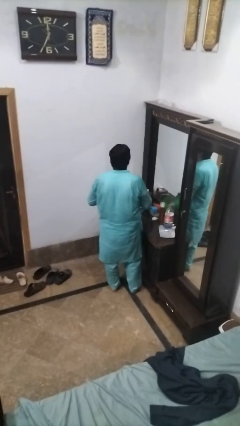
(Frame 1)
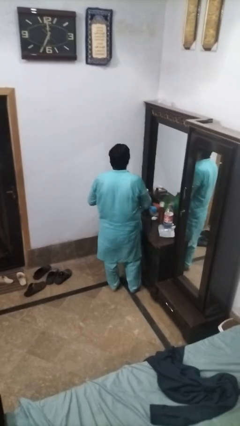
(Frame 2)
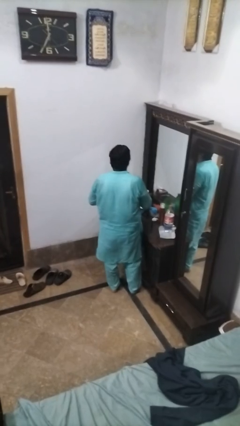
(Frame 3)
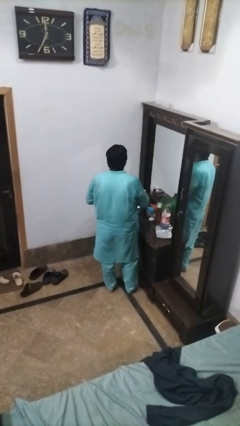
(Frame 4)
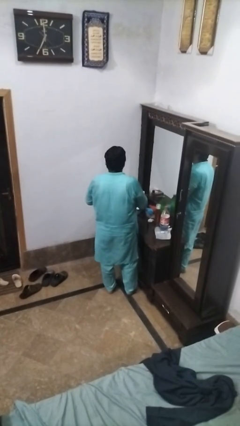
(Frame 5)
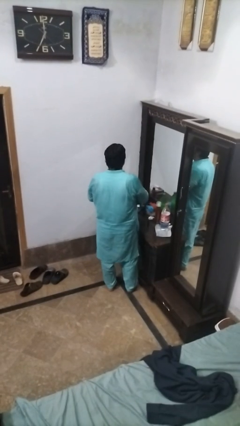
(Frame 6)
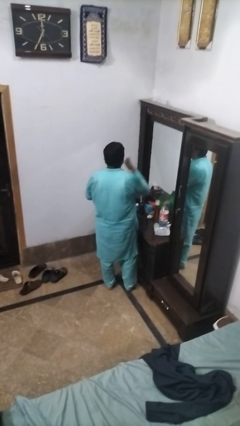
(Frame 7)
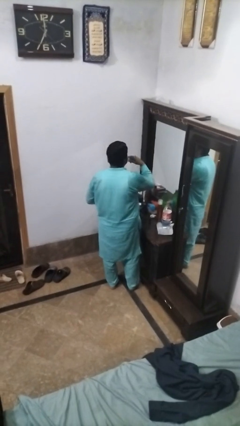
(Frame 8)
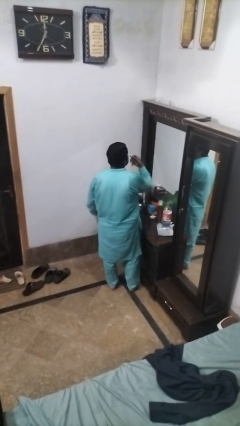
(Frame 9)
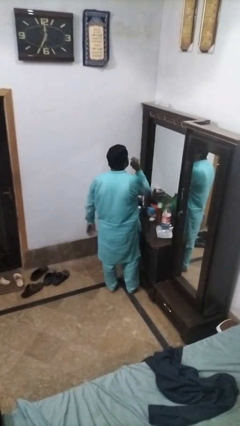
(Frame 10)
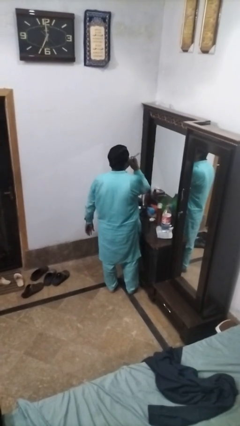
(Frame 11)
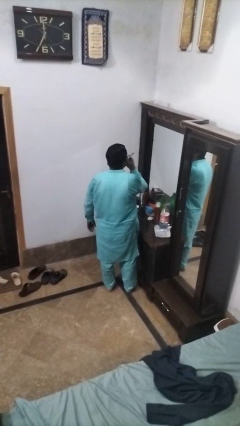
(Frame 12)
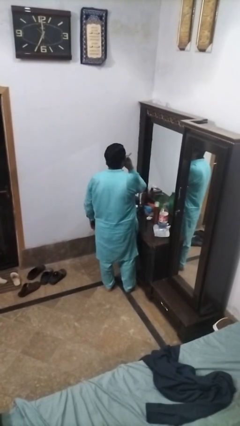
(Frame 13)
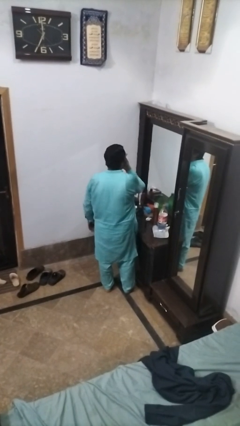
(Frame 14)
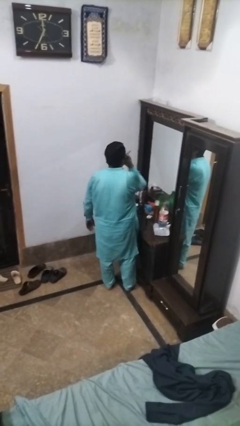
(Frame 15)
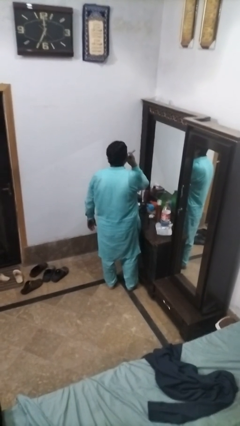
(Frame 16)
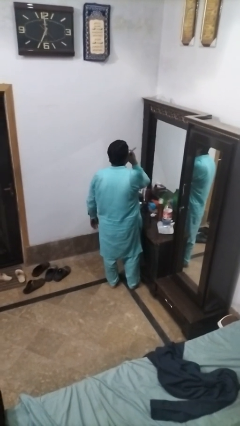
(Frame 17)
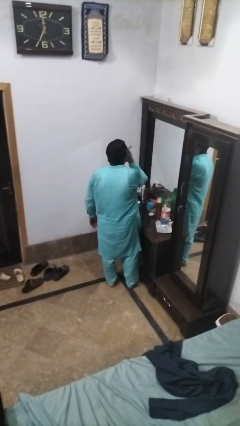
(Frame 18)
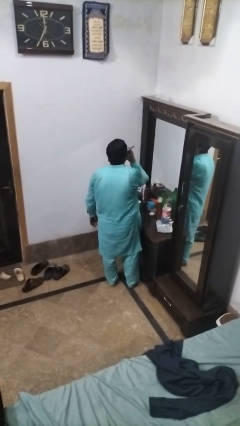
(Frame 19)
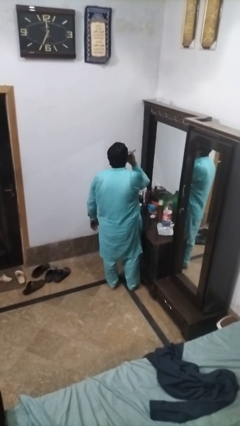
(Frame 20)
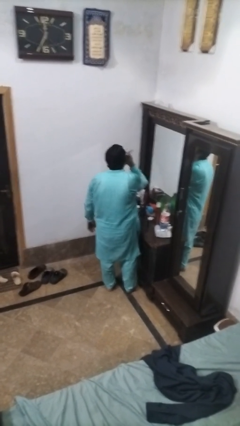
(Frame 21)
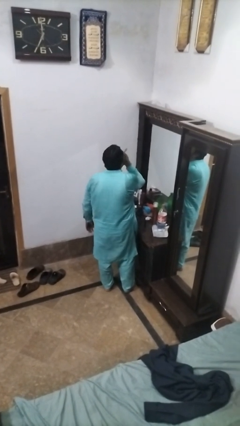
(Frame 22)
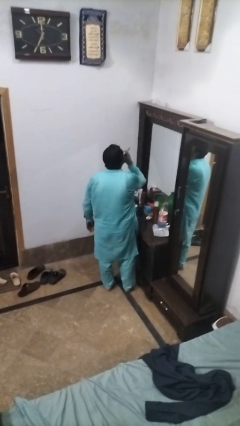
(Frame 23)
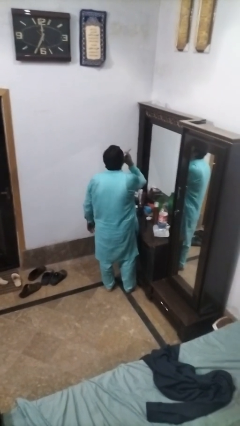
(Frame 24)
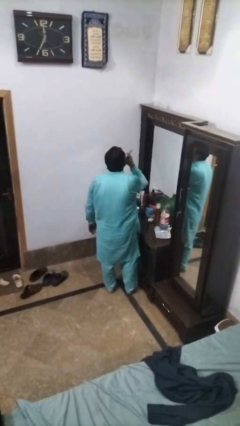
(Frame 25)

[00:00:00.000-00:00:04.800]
person applies lip makeup

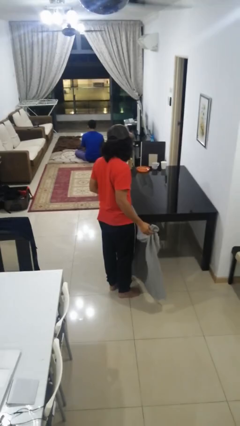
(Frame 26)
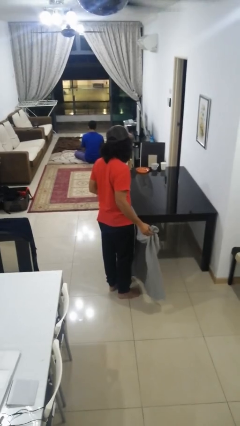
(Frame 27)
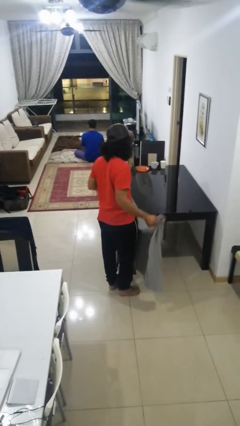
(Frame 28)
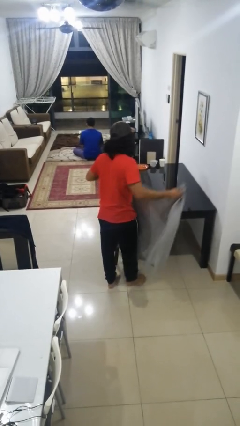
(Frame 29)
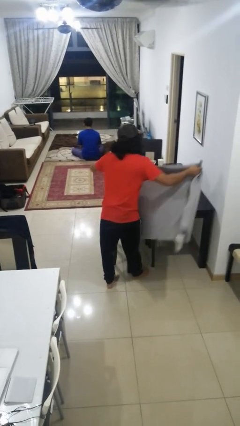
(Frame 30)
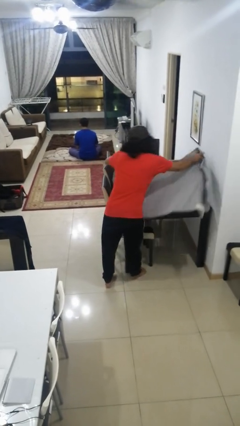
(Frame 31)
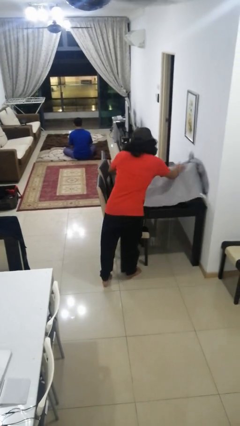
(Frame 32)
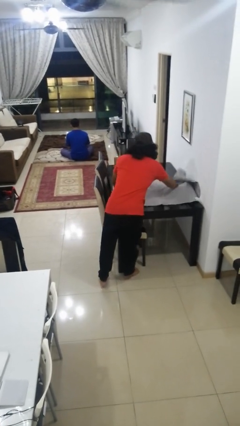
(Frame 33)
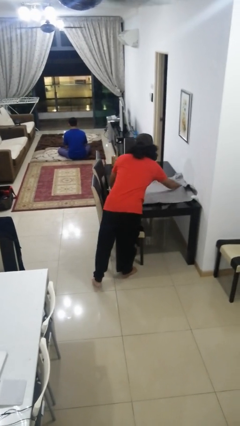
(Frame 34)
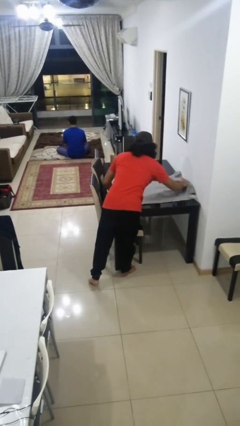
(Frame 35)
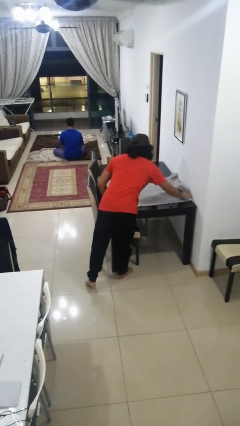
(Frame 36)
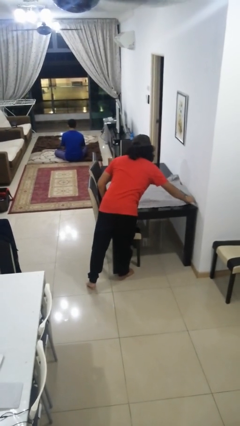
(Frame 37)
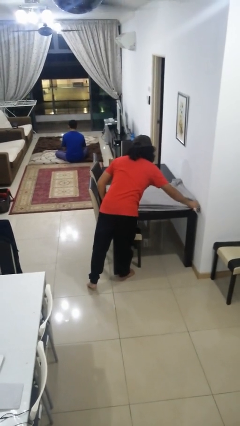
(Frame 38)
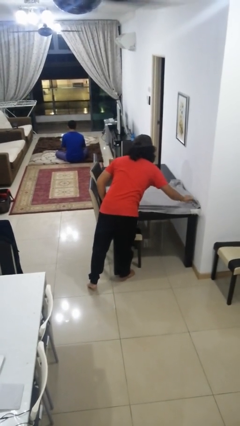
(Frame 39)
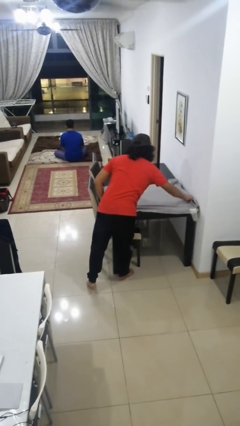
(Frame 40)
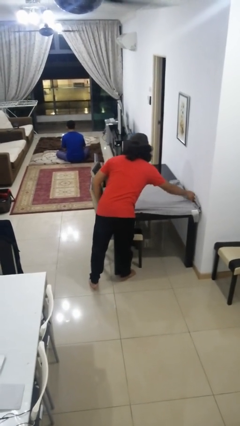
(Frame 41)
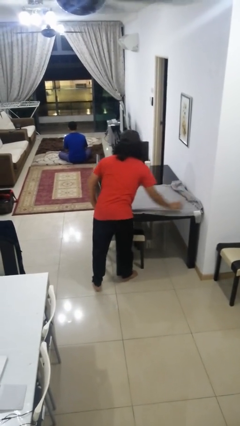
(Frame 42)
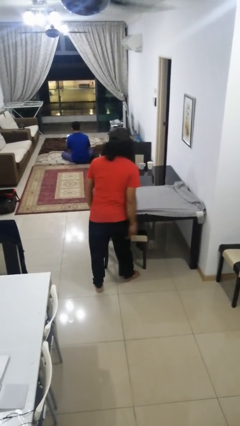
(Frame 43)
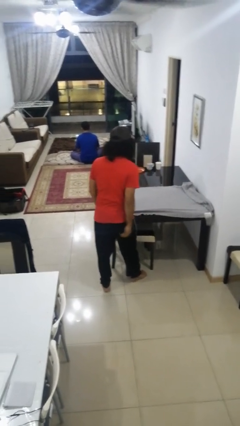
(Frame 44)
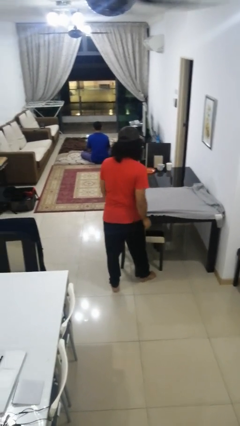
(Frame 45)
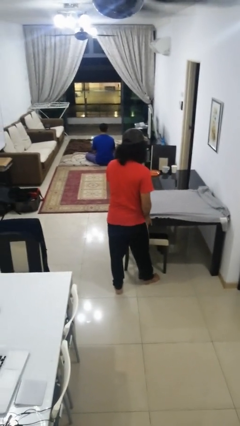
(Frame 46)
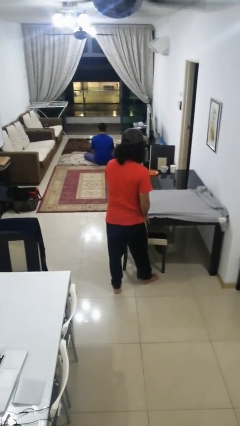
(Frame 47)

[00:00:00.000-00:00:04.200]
person spreads tablecloth

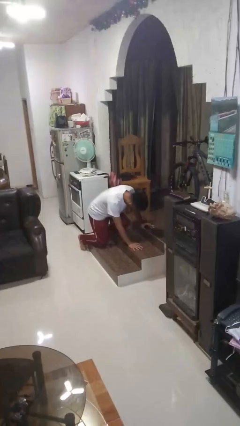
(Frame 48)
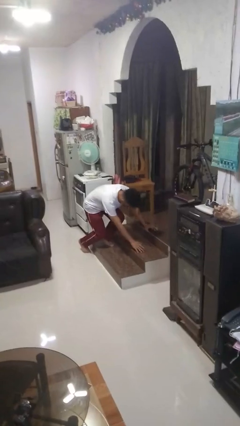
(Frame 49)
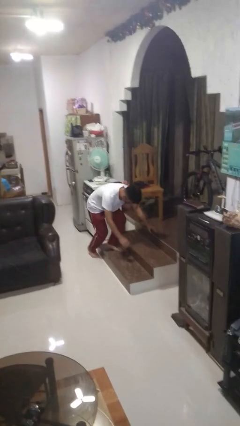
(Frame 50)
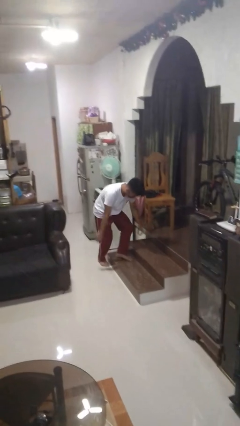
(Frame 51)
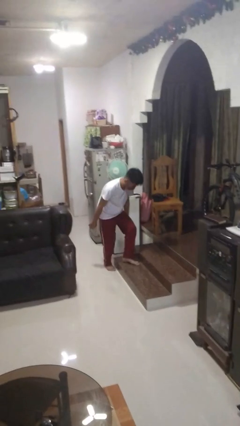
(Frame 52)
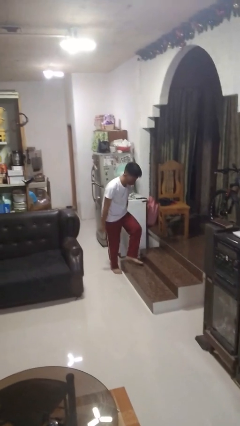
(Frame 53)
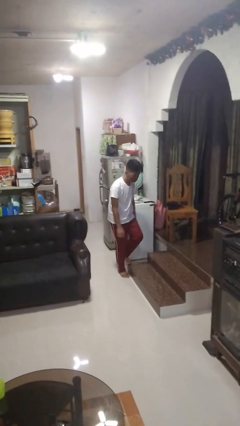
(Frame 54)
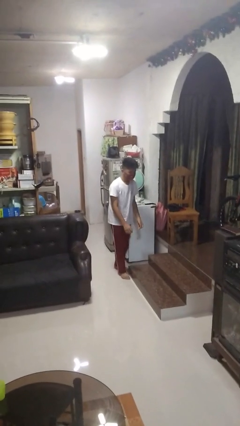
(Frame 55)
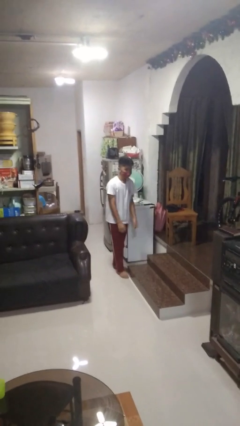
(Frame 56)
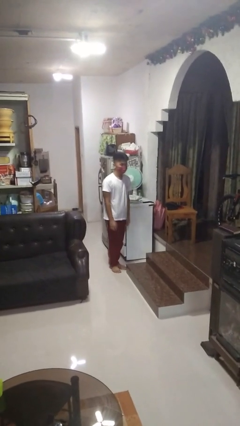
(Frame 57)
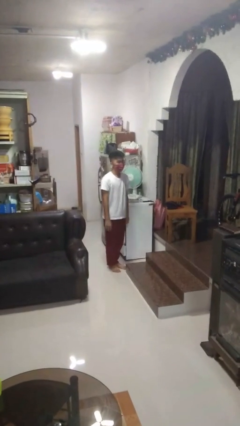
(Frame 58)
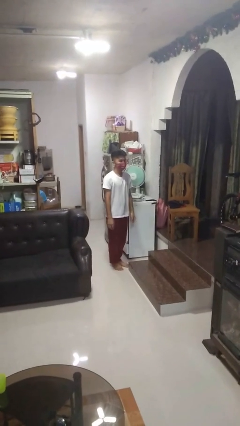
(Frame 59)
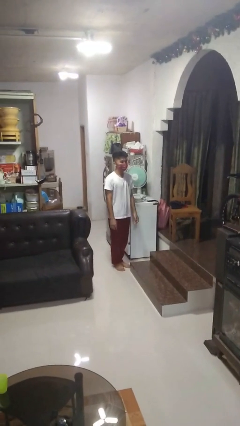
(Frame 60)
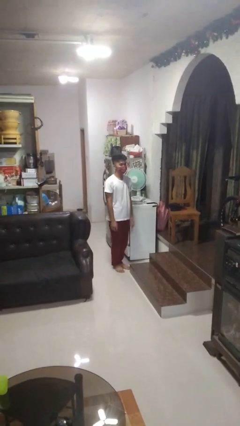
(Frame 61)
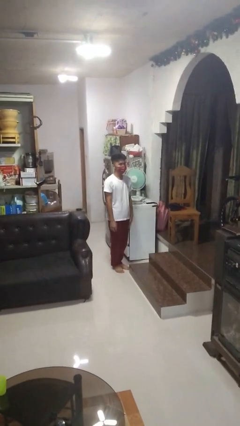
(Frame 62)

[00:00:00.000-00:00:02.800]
person stands up from floor

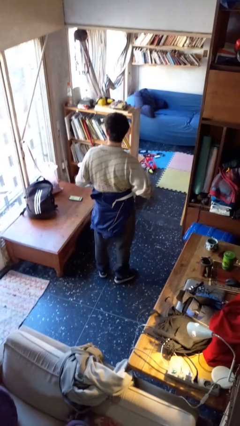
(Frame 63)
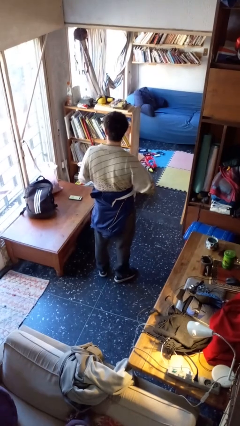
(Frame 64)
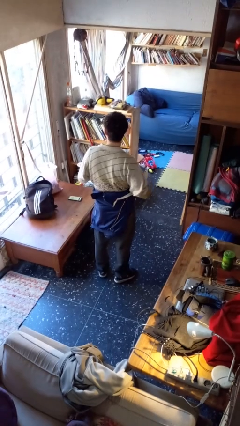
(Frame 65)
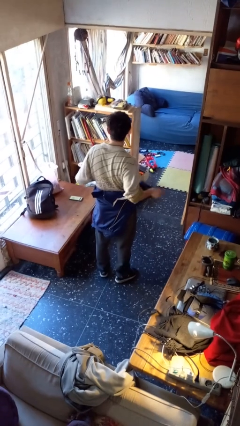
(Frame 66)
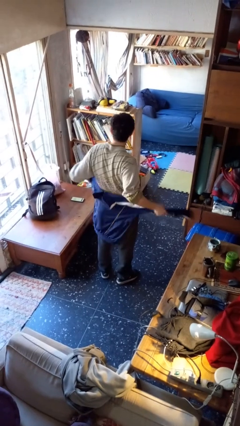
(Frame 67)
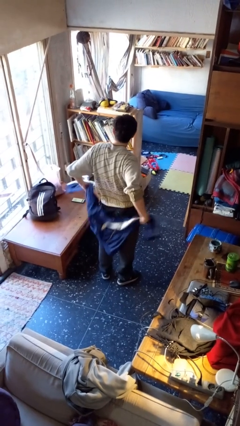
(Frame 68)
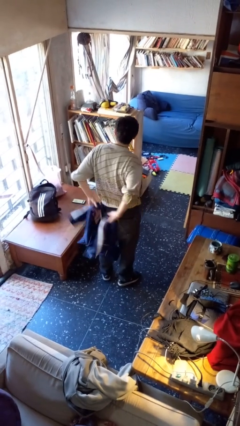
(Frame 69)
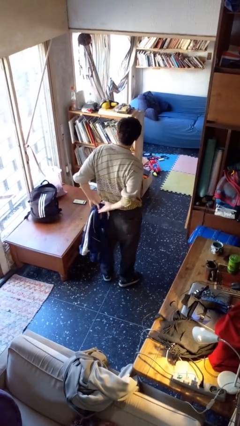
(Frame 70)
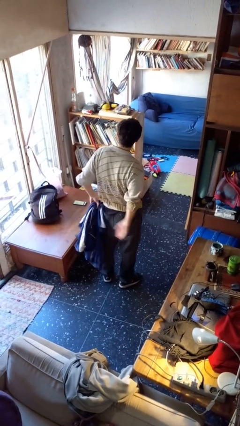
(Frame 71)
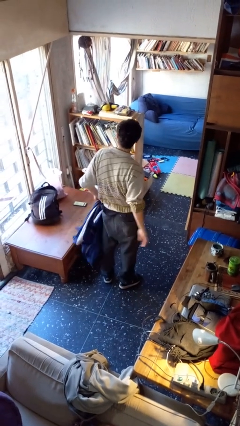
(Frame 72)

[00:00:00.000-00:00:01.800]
person unties jacket around waist

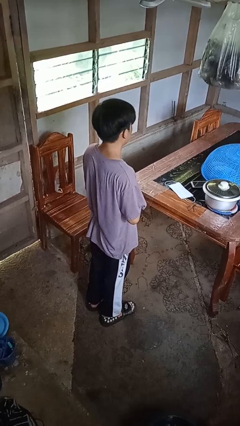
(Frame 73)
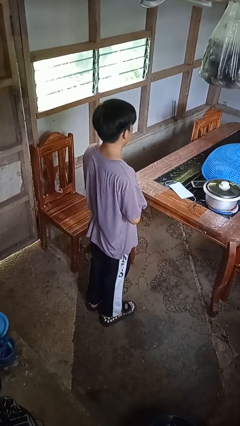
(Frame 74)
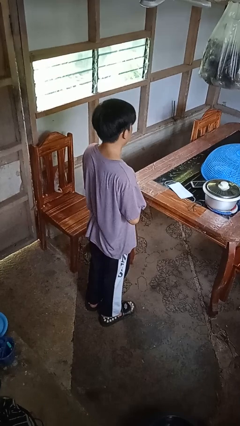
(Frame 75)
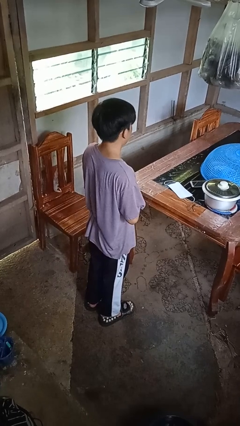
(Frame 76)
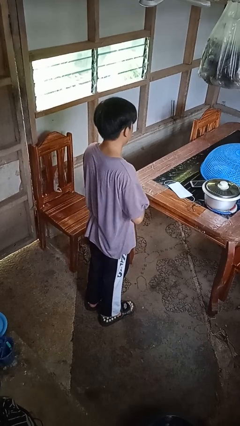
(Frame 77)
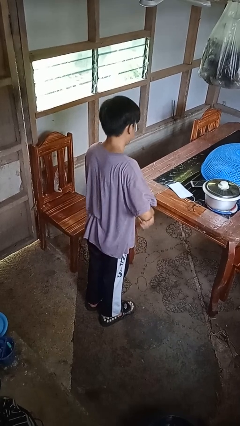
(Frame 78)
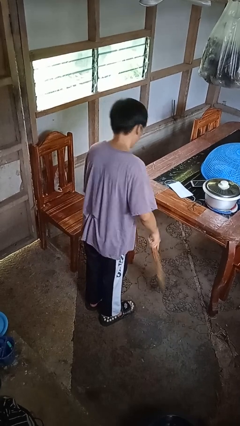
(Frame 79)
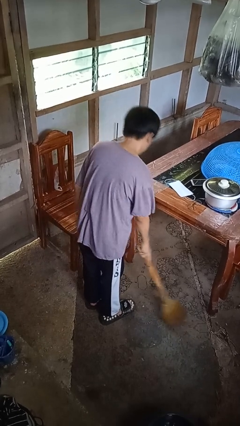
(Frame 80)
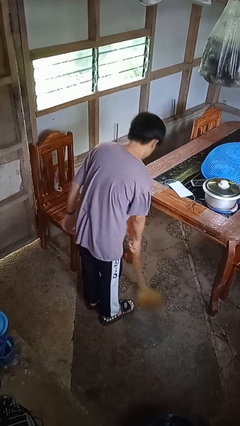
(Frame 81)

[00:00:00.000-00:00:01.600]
person sweeps floor

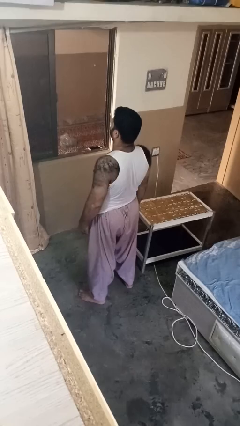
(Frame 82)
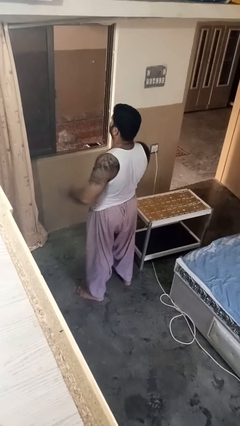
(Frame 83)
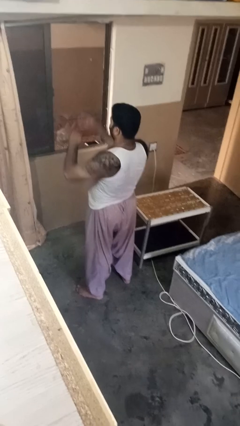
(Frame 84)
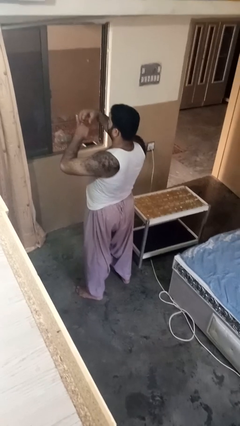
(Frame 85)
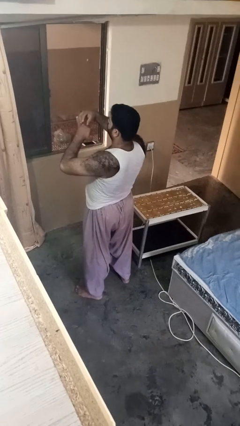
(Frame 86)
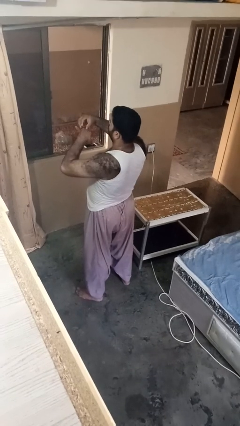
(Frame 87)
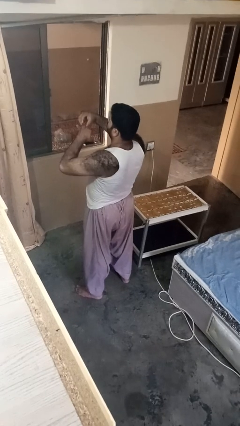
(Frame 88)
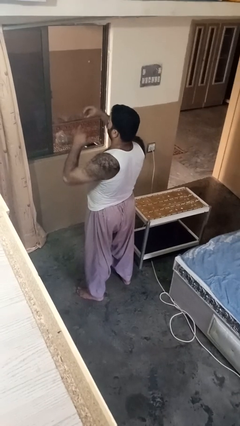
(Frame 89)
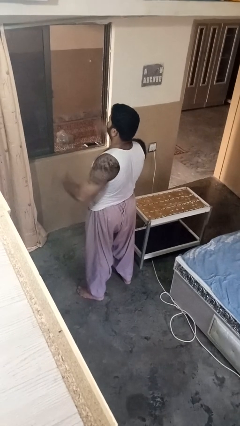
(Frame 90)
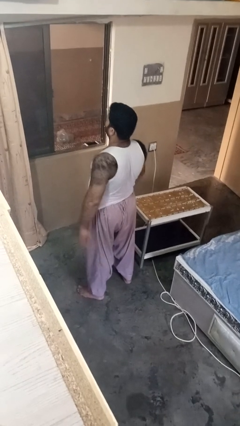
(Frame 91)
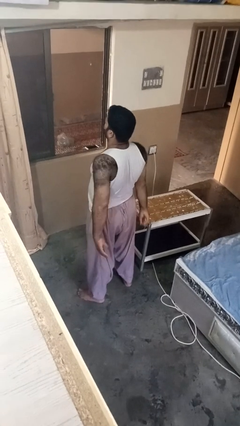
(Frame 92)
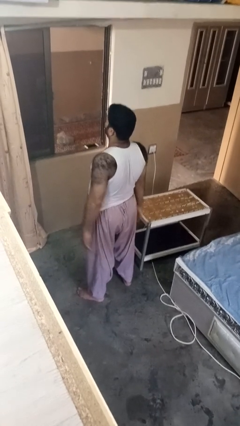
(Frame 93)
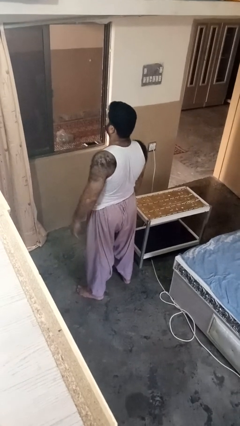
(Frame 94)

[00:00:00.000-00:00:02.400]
person takes off ring
